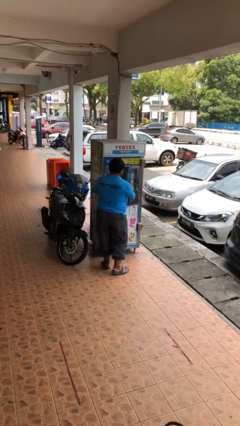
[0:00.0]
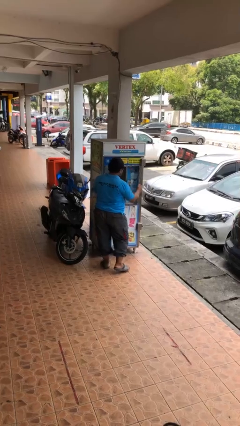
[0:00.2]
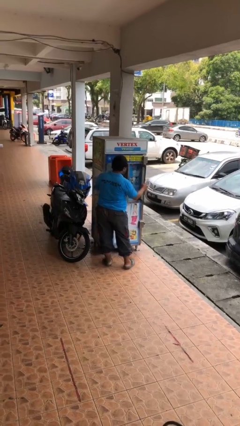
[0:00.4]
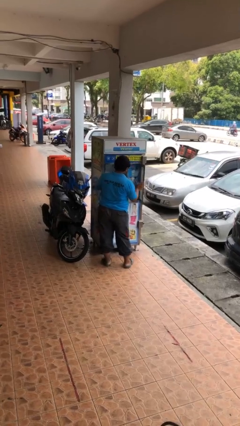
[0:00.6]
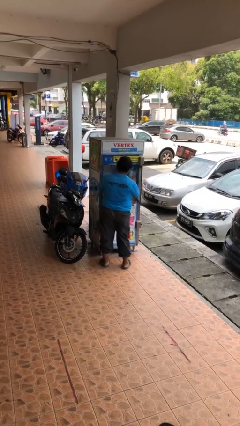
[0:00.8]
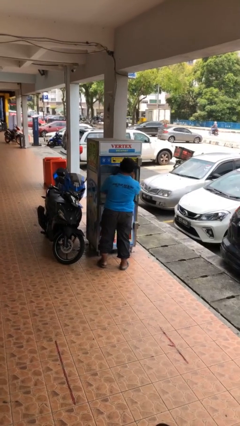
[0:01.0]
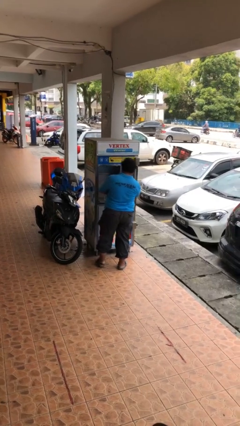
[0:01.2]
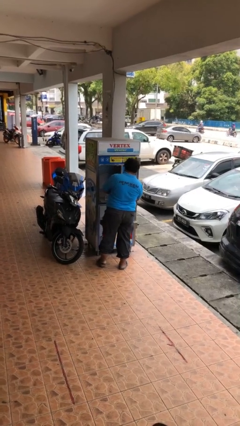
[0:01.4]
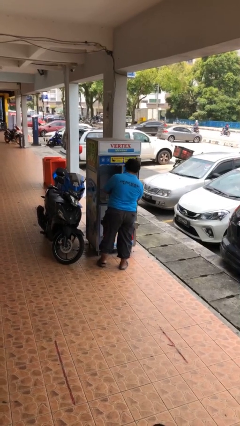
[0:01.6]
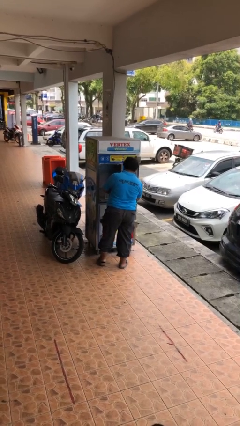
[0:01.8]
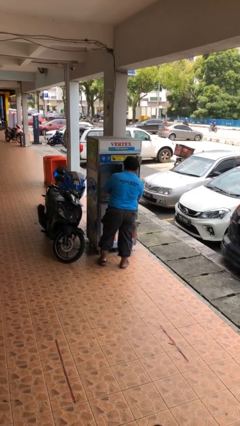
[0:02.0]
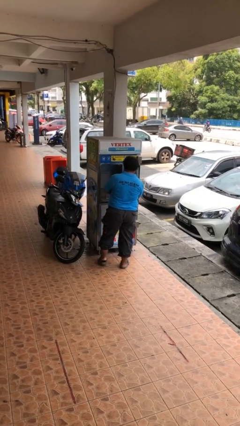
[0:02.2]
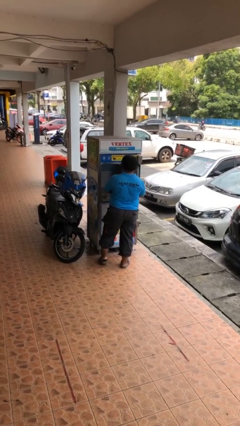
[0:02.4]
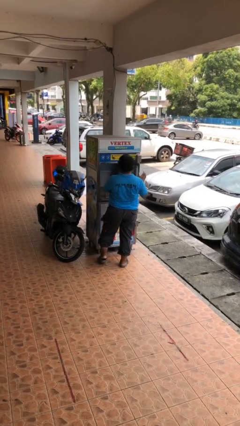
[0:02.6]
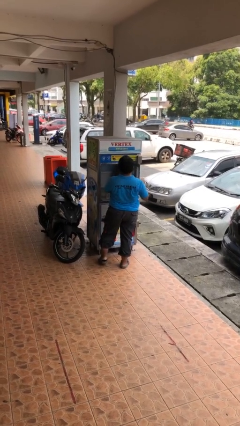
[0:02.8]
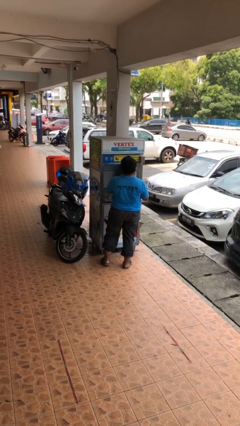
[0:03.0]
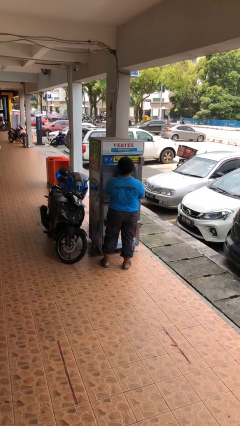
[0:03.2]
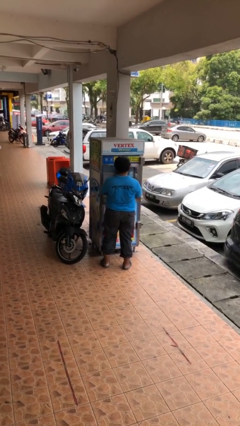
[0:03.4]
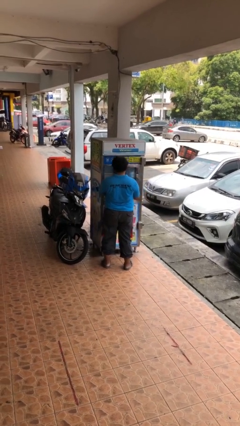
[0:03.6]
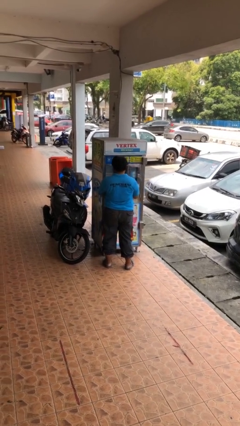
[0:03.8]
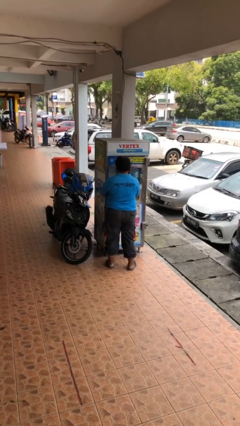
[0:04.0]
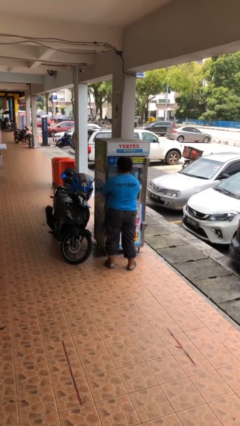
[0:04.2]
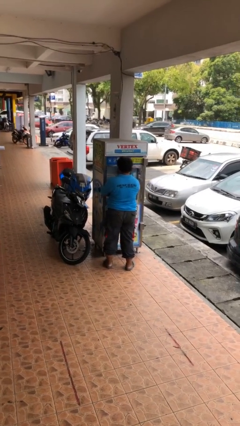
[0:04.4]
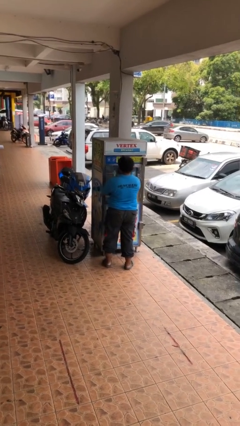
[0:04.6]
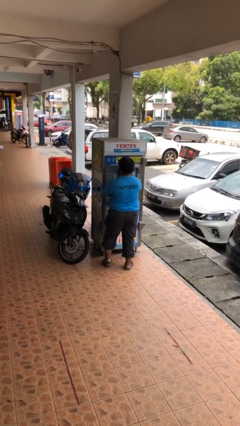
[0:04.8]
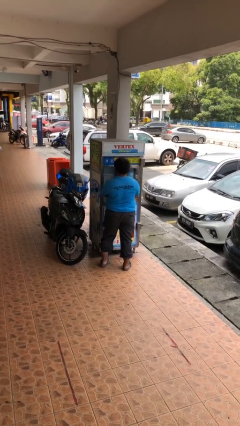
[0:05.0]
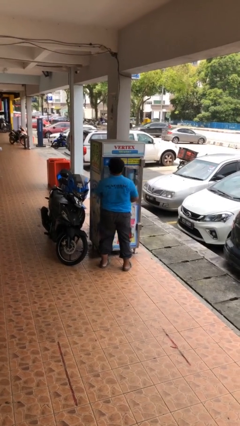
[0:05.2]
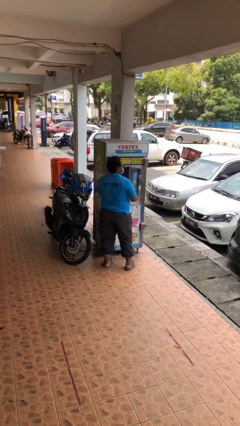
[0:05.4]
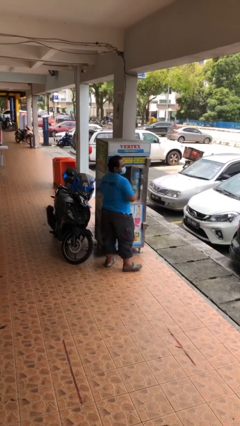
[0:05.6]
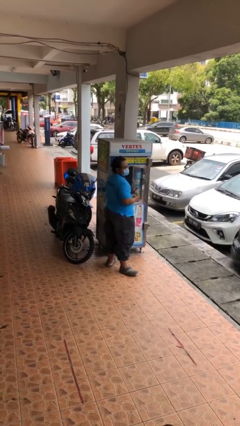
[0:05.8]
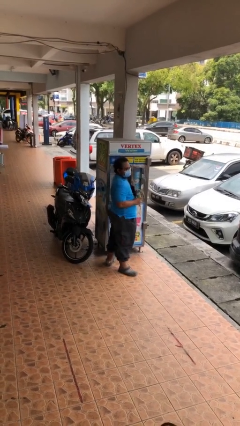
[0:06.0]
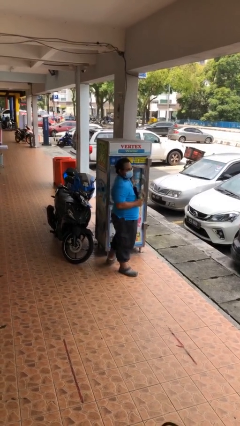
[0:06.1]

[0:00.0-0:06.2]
person purchases from machine

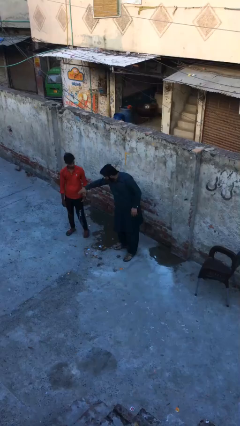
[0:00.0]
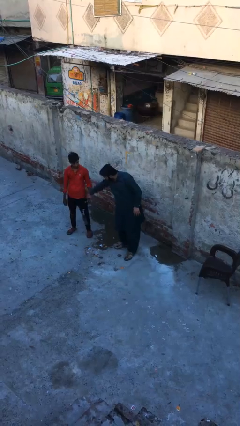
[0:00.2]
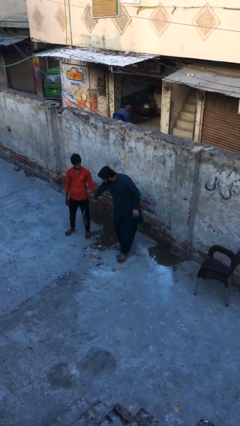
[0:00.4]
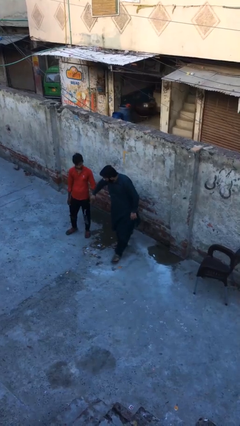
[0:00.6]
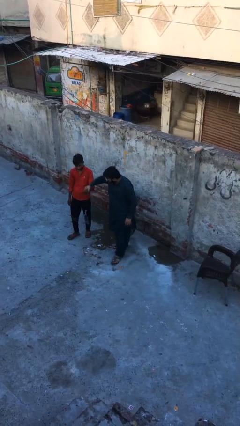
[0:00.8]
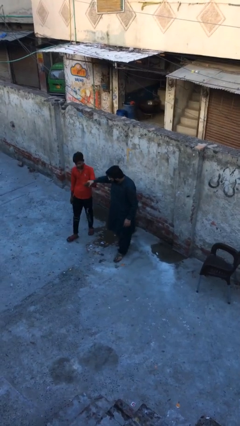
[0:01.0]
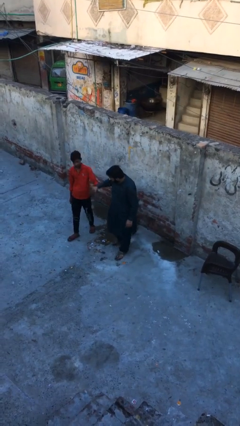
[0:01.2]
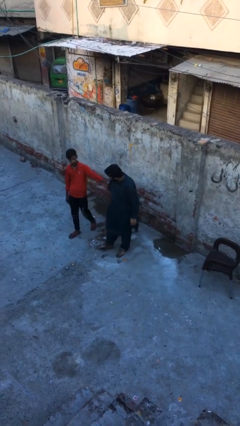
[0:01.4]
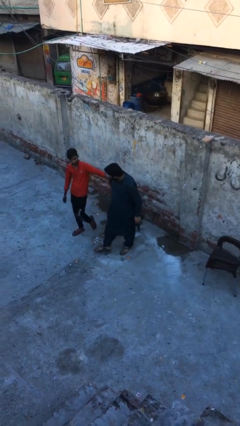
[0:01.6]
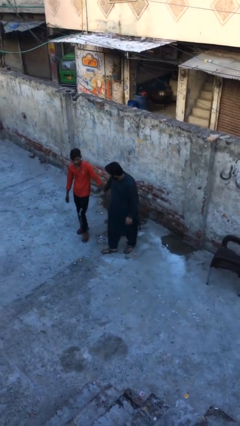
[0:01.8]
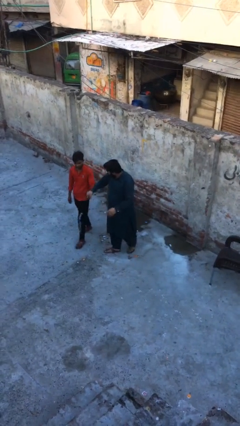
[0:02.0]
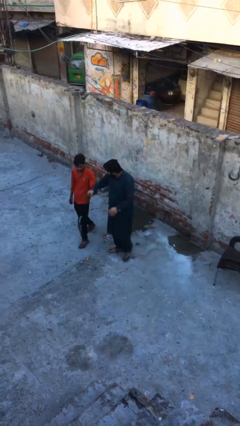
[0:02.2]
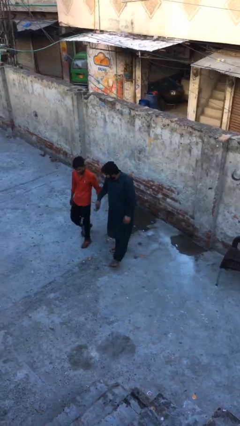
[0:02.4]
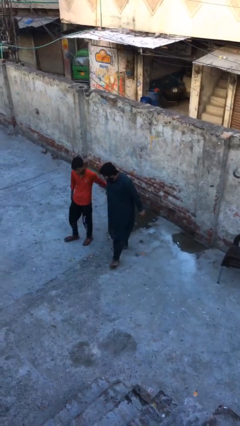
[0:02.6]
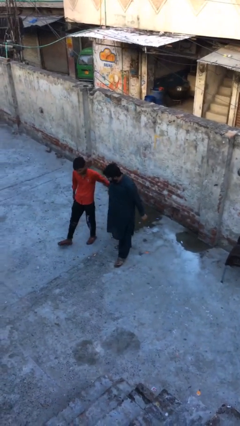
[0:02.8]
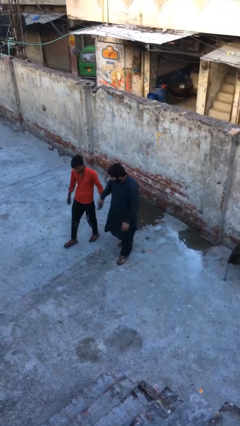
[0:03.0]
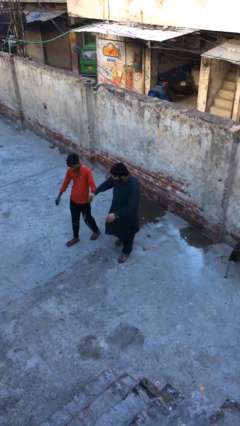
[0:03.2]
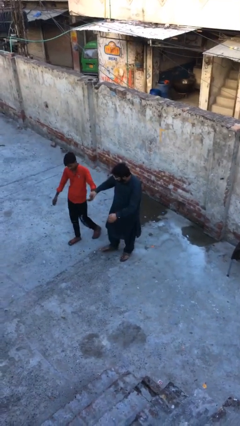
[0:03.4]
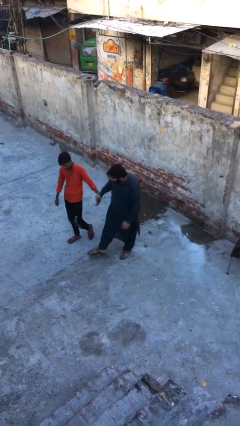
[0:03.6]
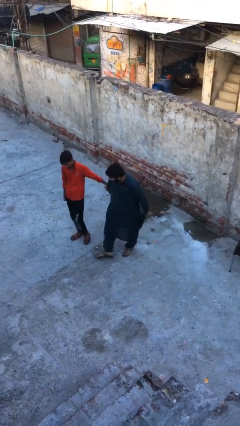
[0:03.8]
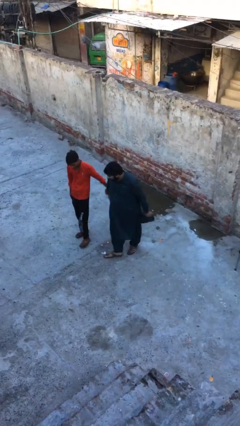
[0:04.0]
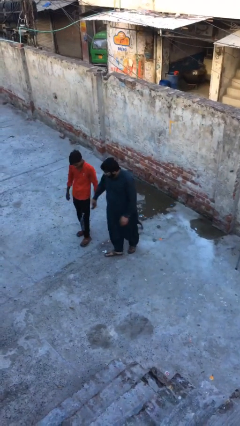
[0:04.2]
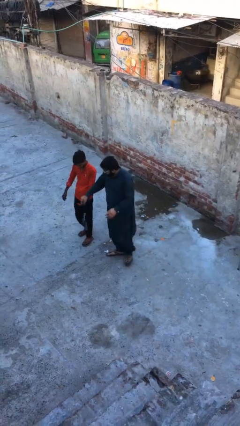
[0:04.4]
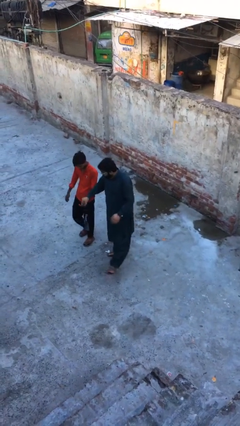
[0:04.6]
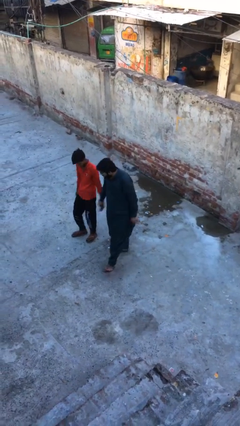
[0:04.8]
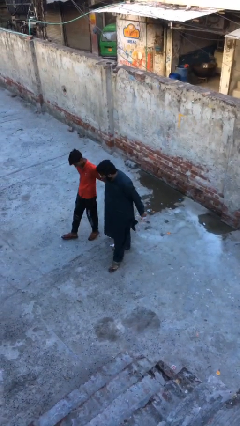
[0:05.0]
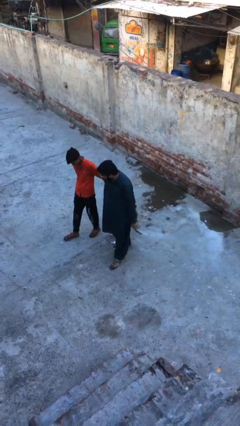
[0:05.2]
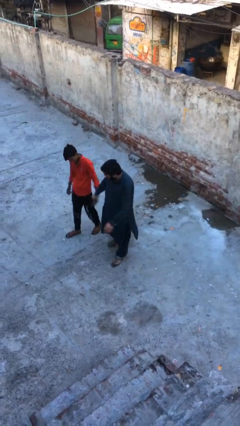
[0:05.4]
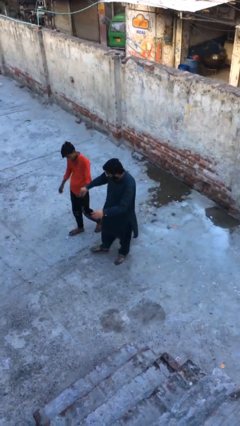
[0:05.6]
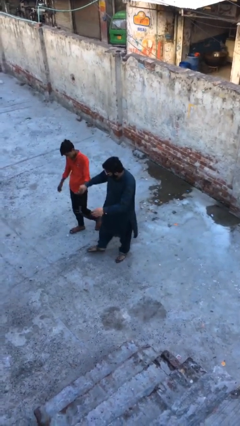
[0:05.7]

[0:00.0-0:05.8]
person holds hand

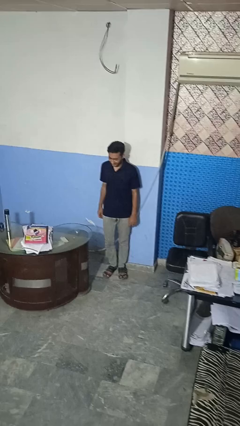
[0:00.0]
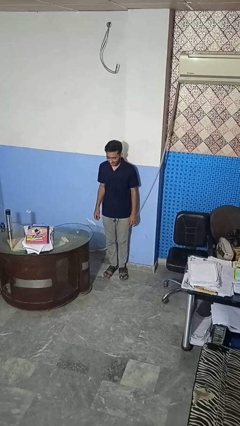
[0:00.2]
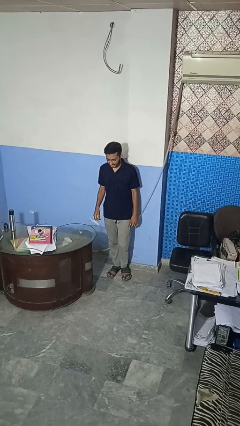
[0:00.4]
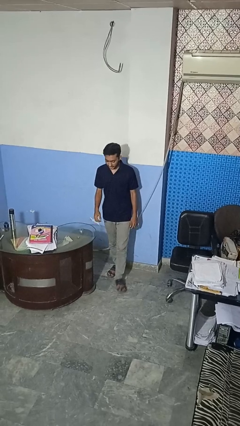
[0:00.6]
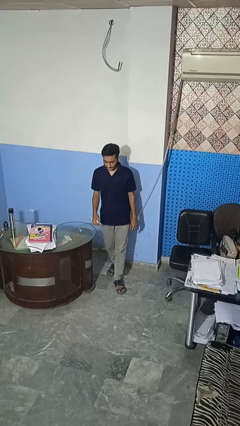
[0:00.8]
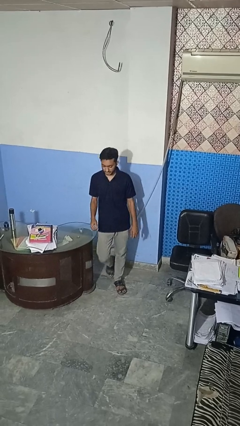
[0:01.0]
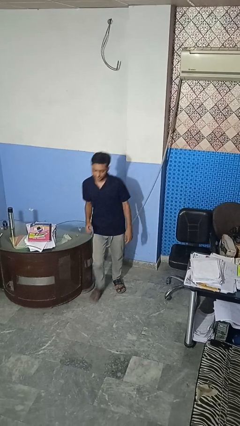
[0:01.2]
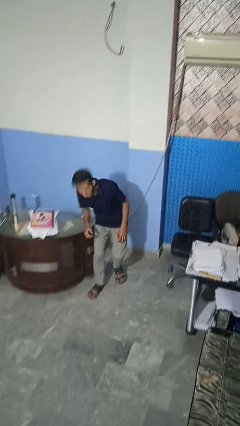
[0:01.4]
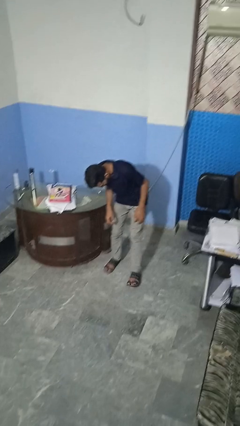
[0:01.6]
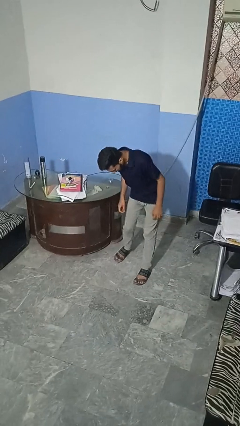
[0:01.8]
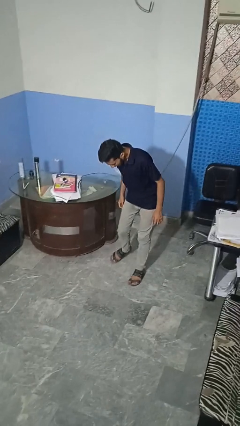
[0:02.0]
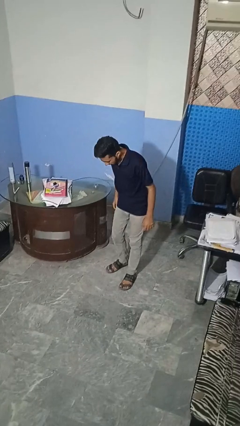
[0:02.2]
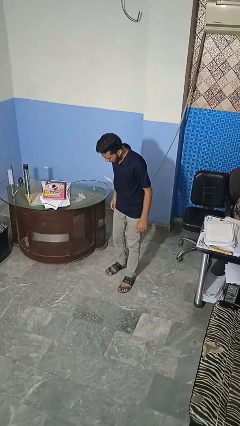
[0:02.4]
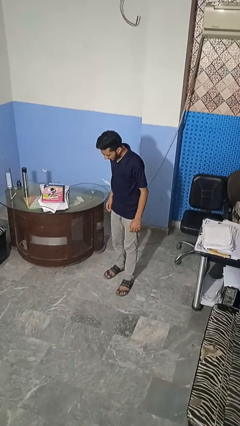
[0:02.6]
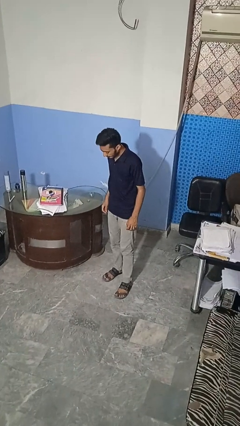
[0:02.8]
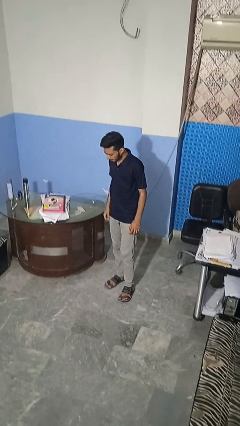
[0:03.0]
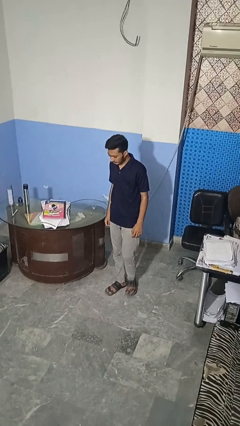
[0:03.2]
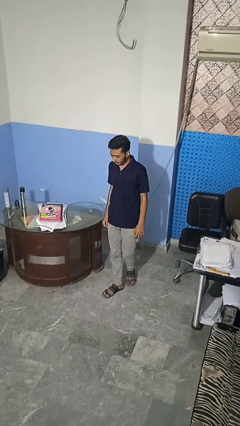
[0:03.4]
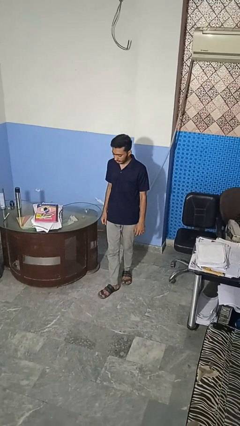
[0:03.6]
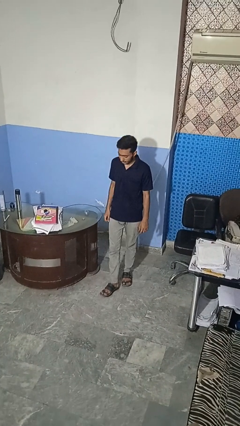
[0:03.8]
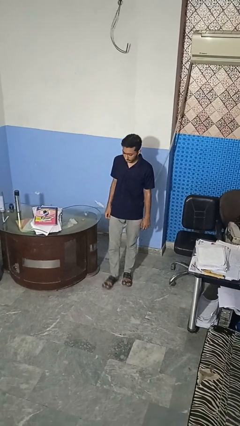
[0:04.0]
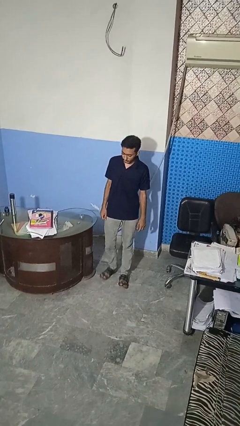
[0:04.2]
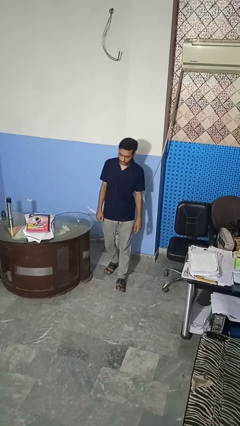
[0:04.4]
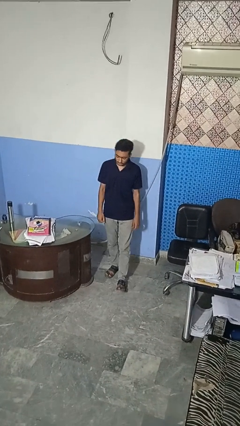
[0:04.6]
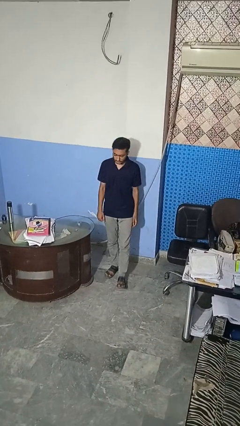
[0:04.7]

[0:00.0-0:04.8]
person bumps into table

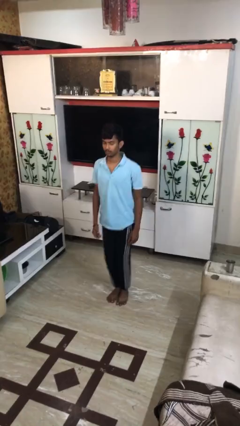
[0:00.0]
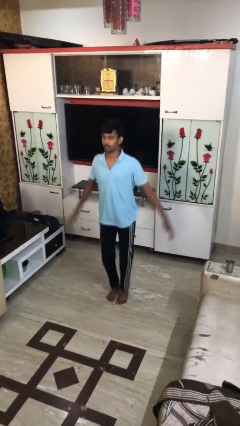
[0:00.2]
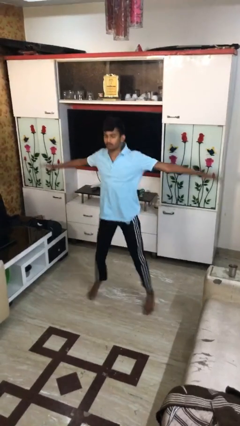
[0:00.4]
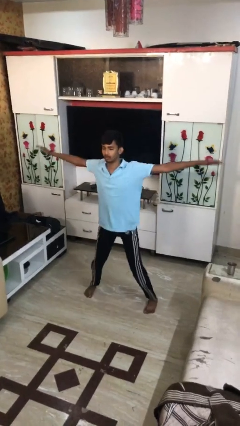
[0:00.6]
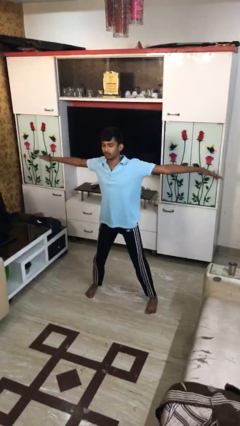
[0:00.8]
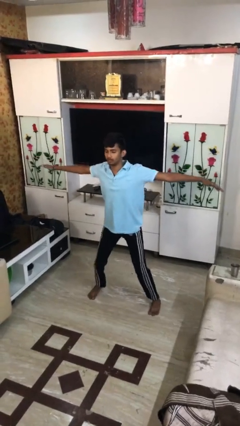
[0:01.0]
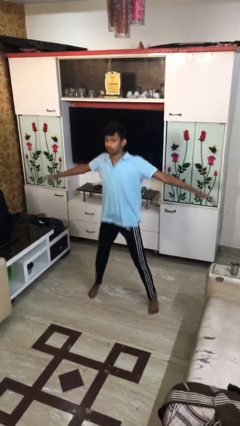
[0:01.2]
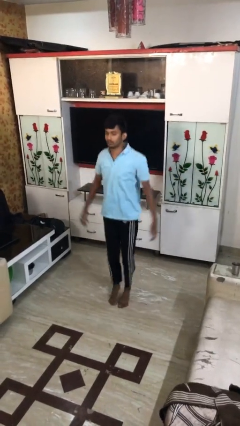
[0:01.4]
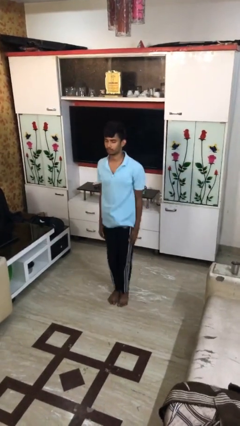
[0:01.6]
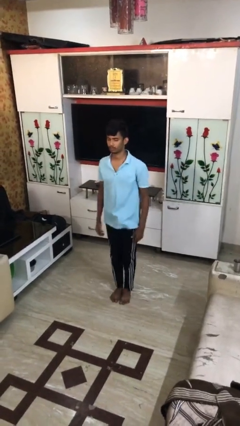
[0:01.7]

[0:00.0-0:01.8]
person exercises with jumping jacks
